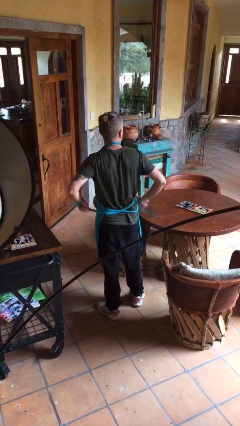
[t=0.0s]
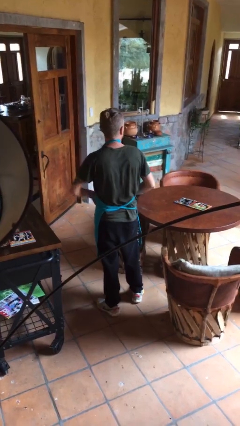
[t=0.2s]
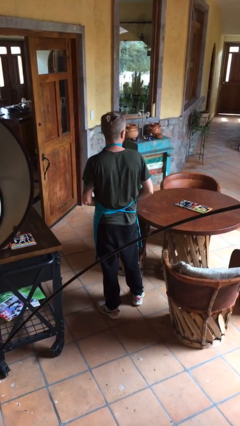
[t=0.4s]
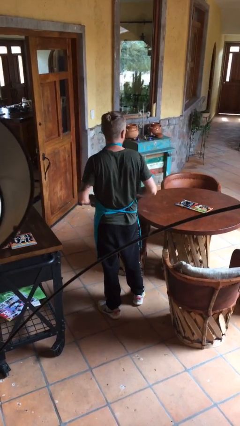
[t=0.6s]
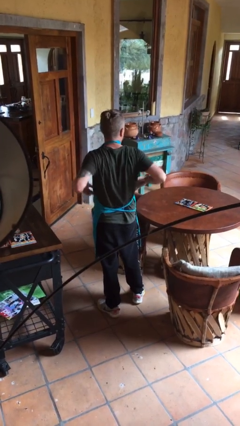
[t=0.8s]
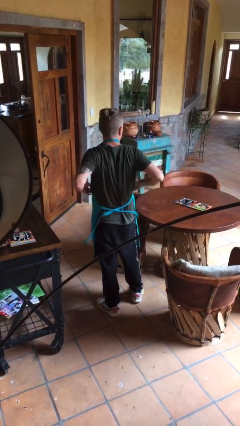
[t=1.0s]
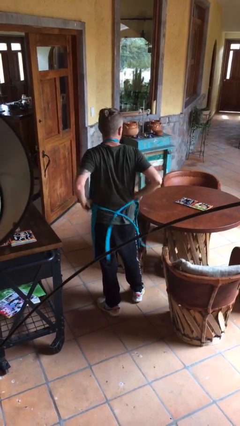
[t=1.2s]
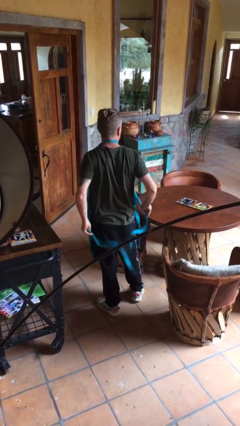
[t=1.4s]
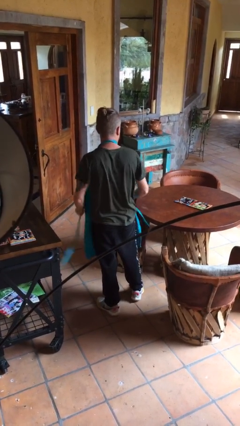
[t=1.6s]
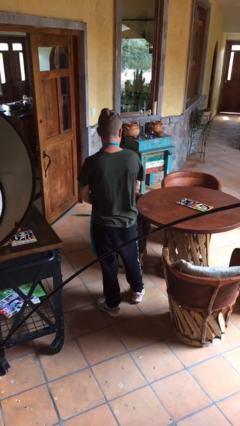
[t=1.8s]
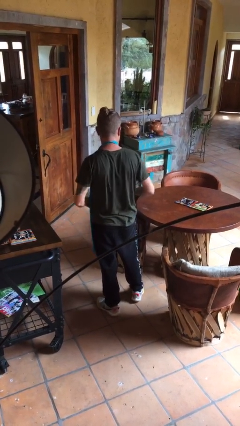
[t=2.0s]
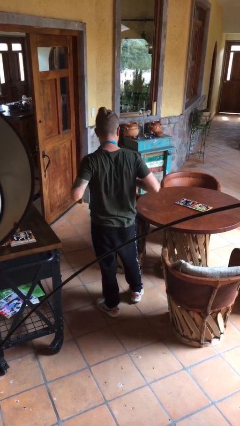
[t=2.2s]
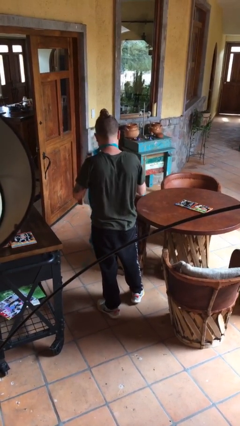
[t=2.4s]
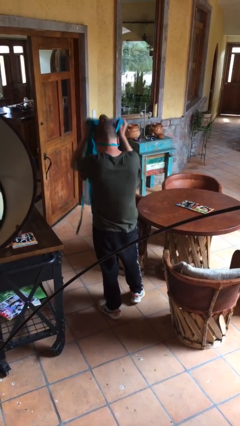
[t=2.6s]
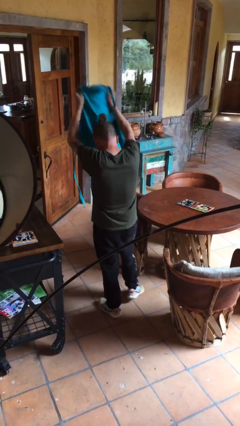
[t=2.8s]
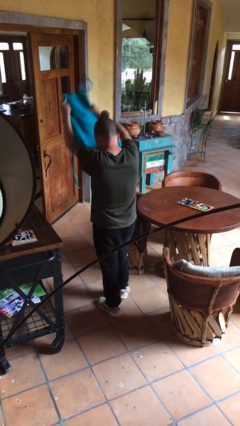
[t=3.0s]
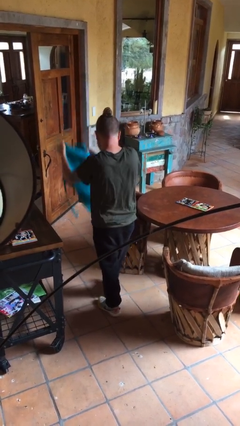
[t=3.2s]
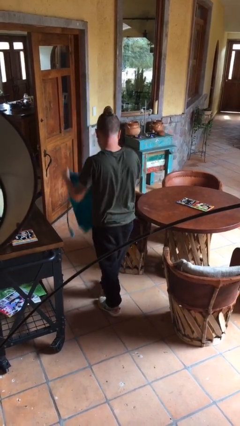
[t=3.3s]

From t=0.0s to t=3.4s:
person takes off apron

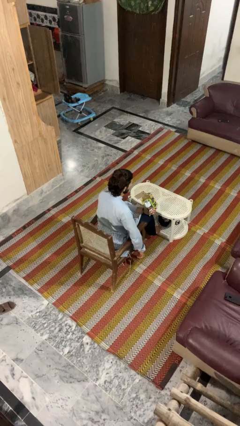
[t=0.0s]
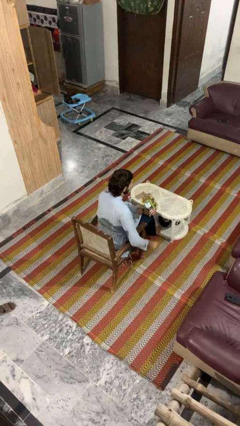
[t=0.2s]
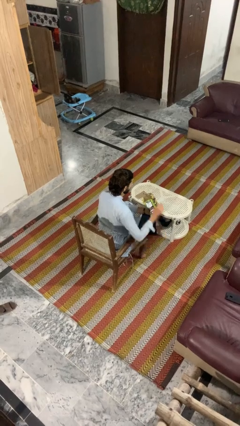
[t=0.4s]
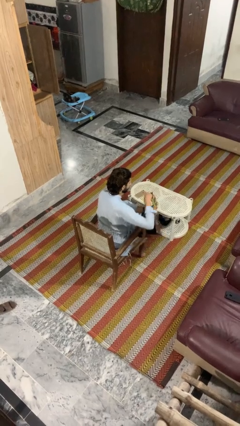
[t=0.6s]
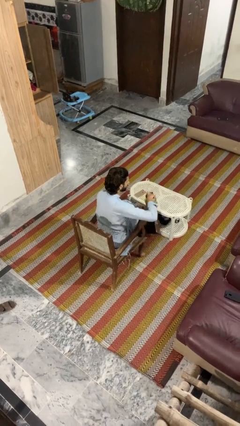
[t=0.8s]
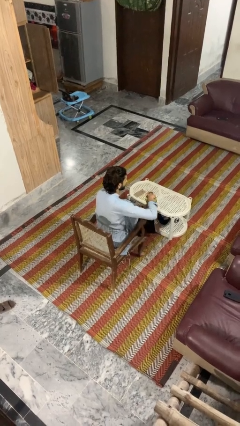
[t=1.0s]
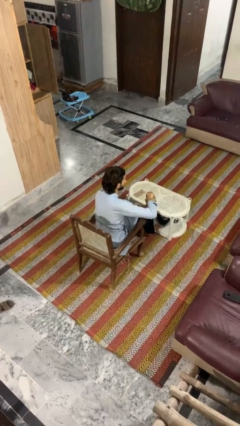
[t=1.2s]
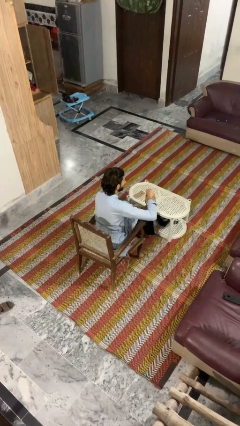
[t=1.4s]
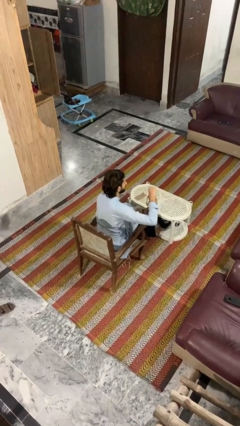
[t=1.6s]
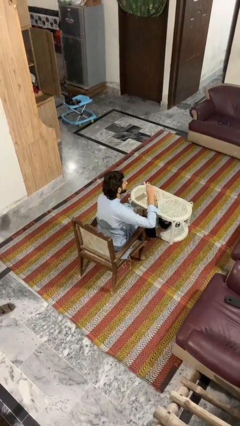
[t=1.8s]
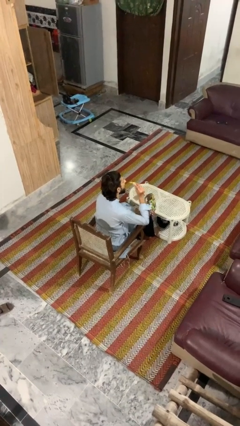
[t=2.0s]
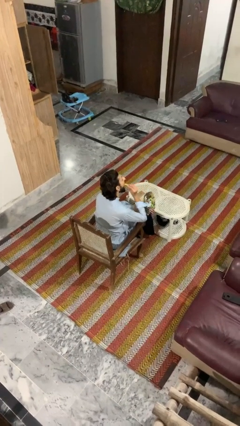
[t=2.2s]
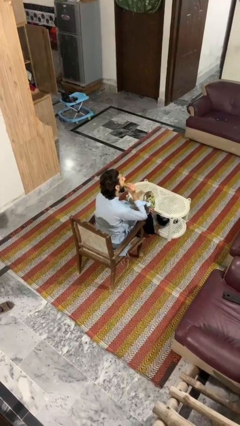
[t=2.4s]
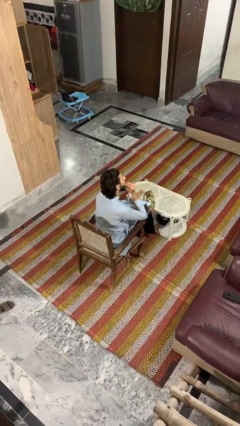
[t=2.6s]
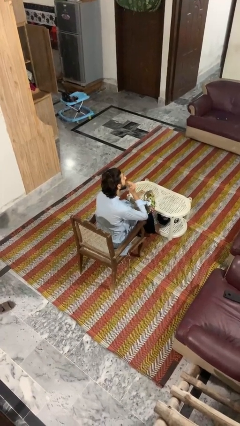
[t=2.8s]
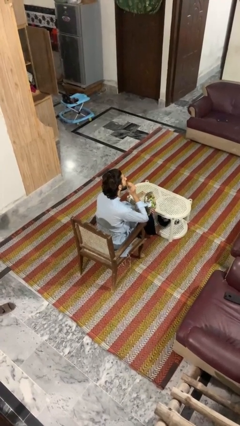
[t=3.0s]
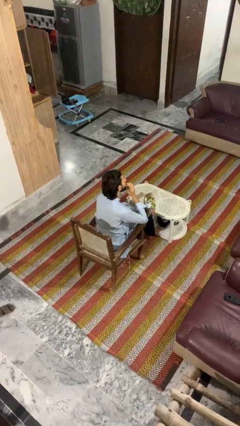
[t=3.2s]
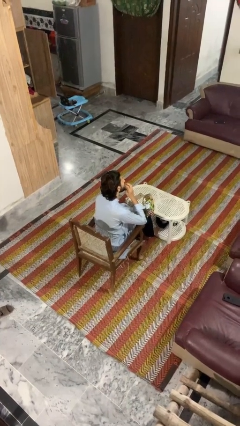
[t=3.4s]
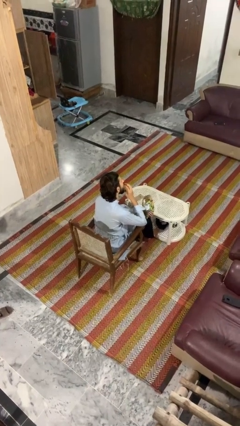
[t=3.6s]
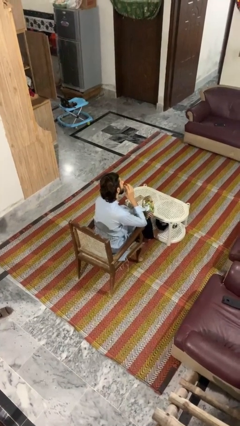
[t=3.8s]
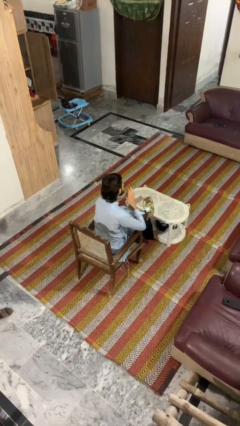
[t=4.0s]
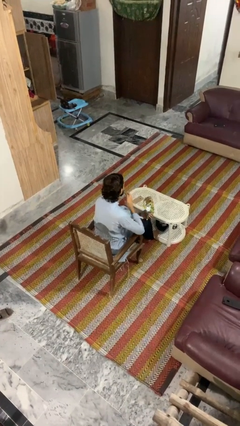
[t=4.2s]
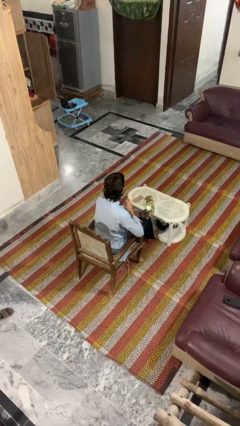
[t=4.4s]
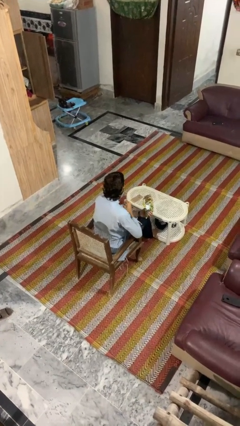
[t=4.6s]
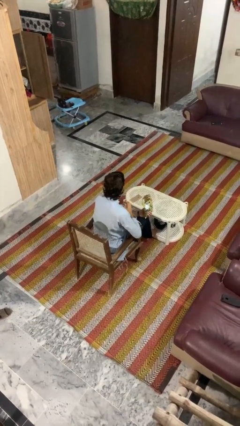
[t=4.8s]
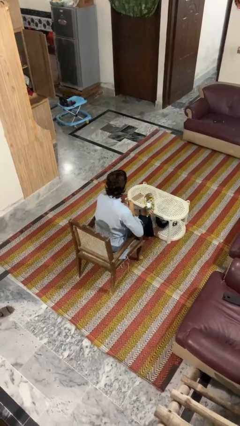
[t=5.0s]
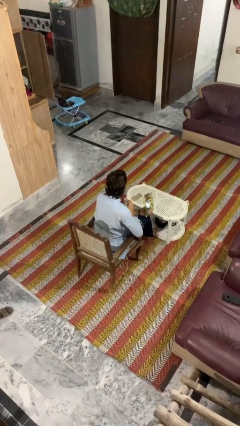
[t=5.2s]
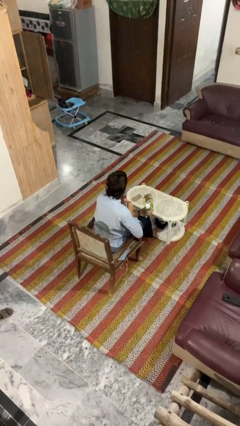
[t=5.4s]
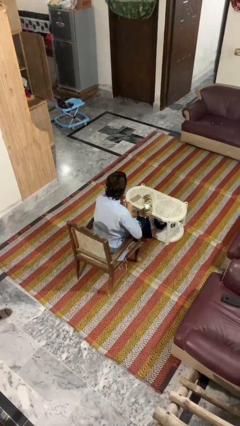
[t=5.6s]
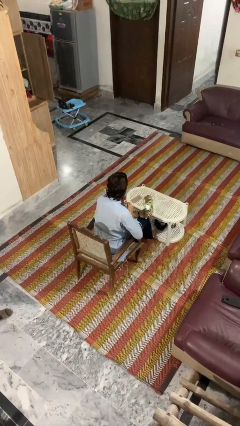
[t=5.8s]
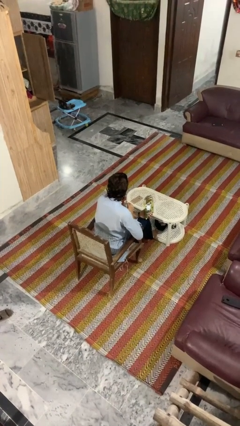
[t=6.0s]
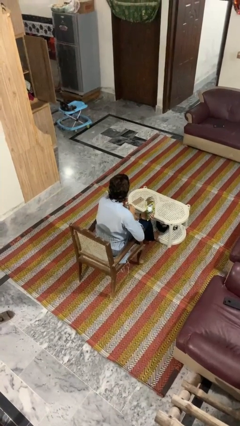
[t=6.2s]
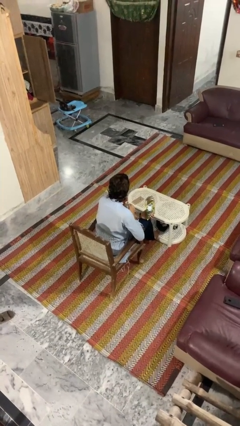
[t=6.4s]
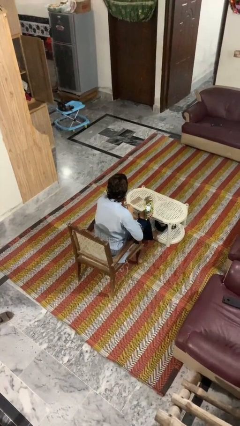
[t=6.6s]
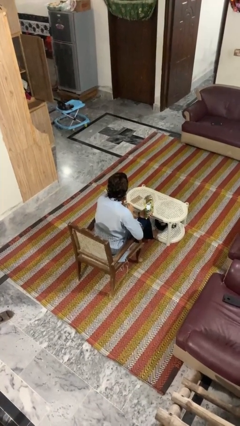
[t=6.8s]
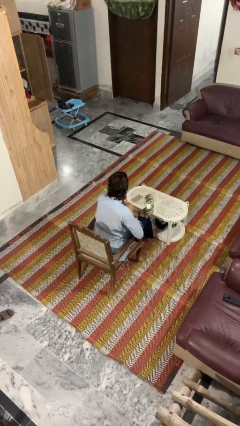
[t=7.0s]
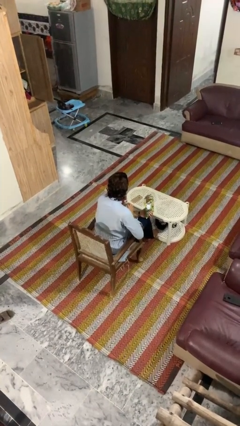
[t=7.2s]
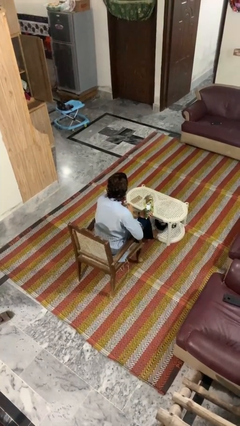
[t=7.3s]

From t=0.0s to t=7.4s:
person eats snack from bag

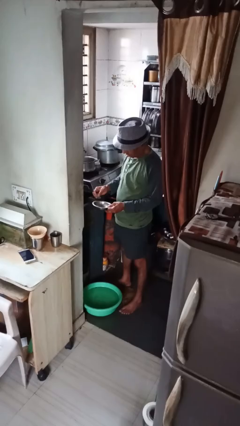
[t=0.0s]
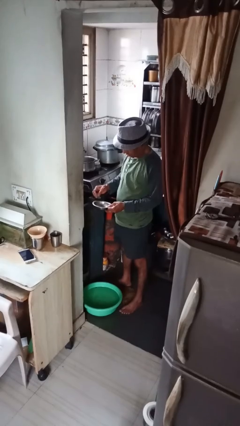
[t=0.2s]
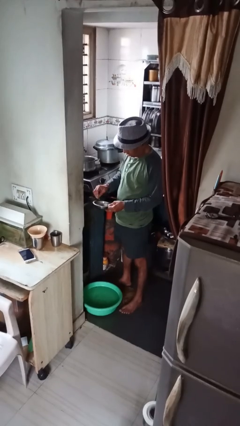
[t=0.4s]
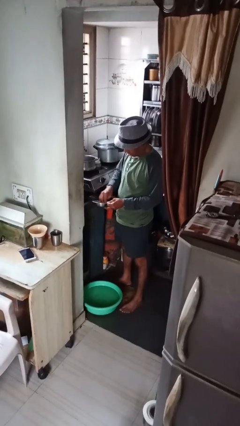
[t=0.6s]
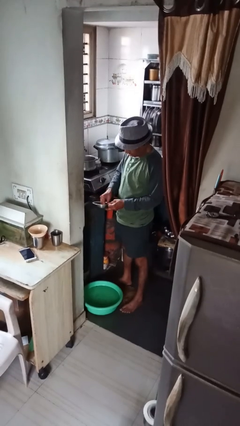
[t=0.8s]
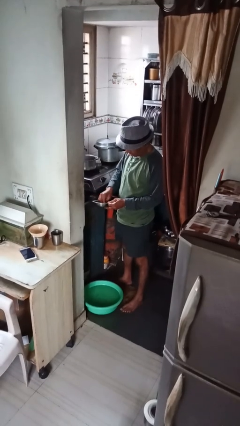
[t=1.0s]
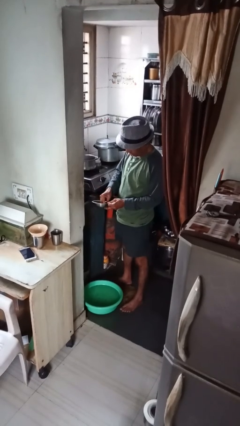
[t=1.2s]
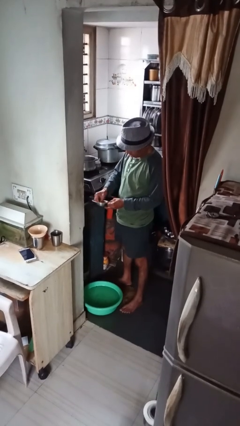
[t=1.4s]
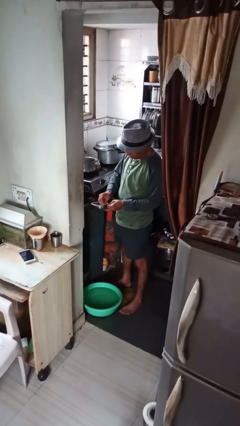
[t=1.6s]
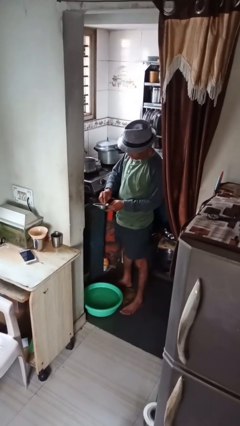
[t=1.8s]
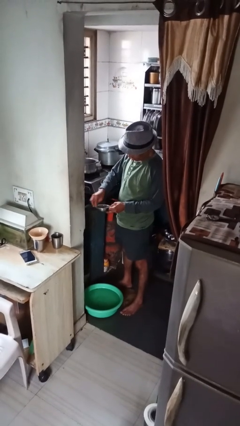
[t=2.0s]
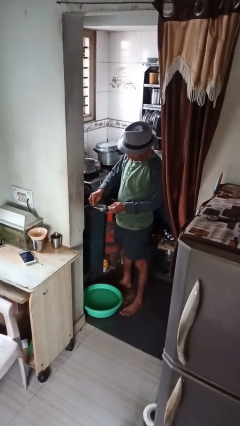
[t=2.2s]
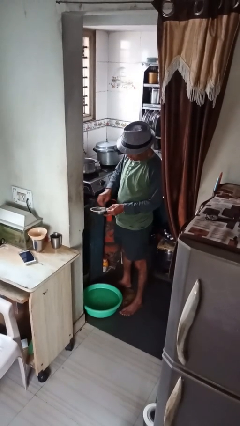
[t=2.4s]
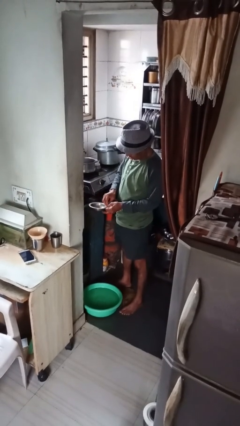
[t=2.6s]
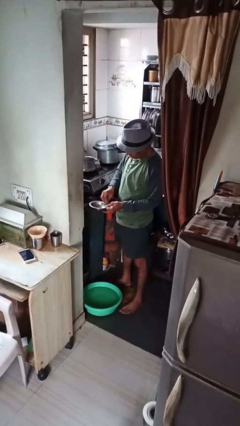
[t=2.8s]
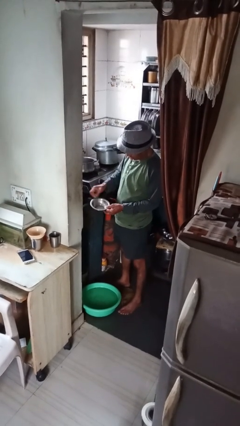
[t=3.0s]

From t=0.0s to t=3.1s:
person washes dish

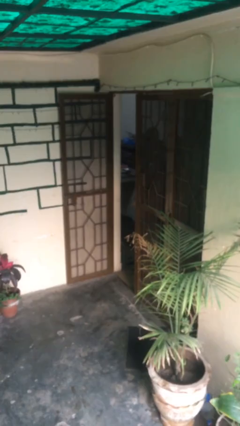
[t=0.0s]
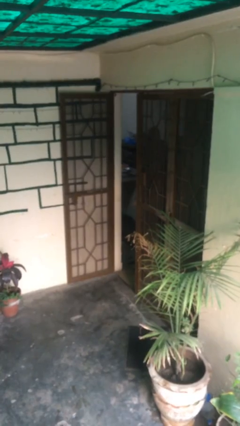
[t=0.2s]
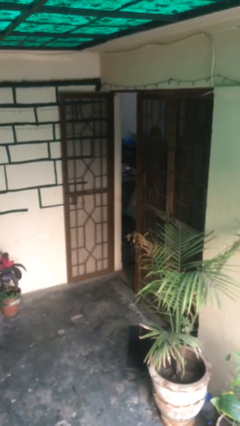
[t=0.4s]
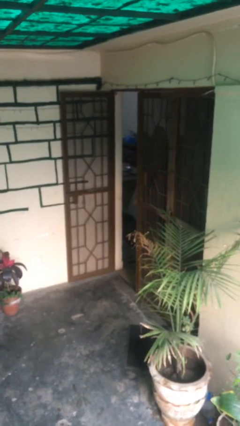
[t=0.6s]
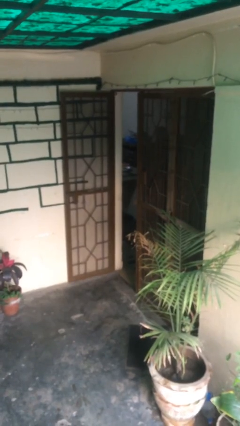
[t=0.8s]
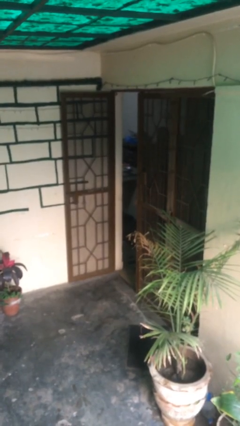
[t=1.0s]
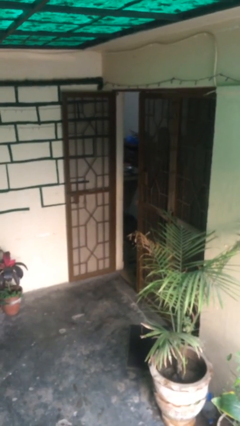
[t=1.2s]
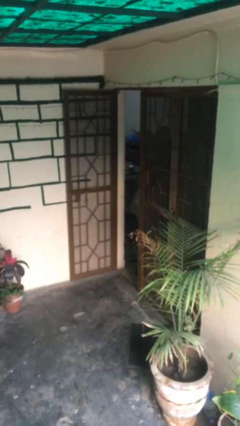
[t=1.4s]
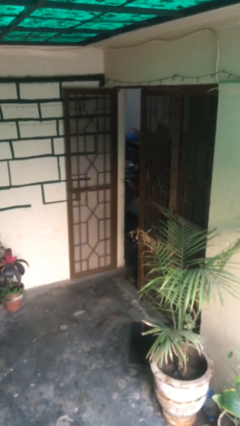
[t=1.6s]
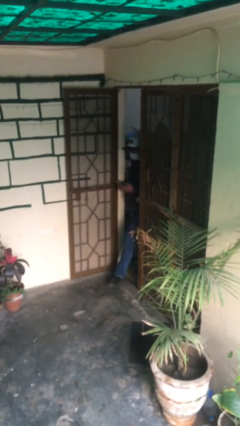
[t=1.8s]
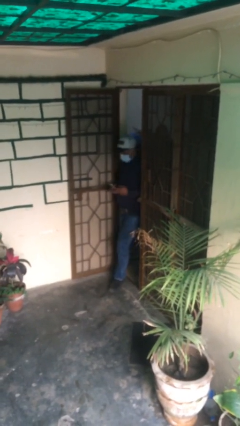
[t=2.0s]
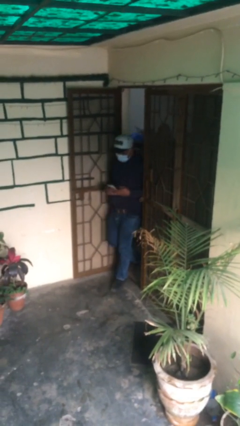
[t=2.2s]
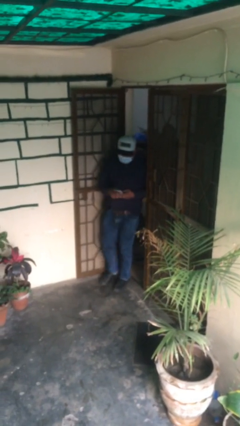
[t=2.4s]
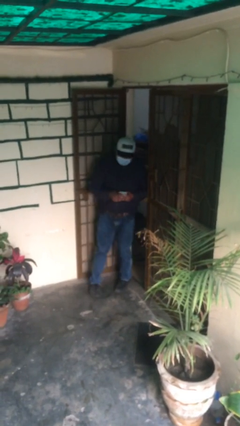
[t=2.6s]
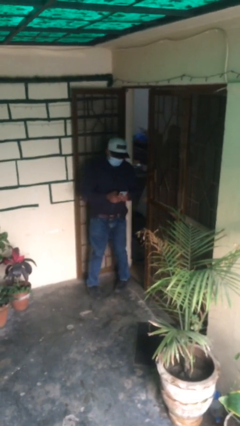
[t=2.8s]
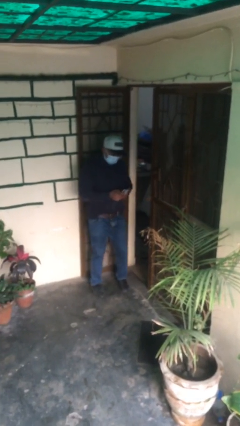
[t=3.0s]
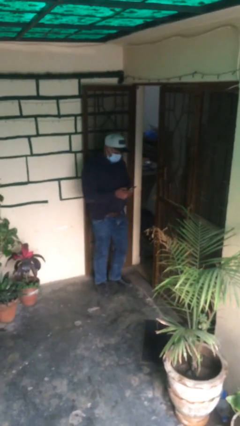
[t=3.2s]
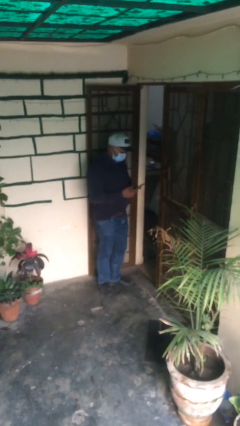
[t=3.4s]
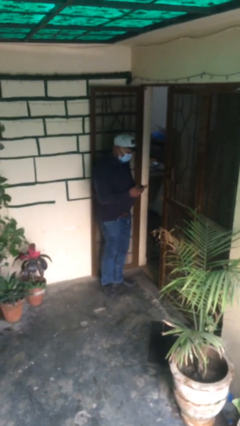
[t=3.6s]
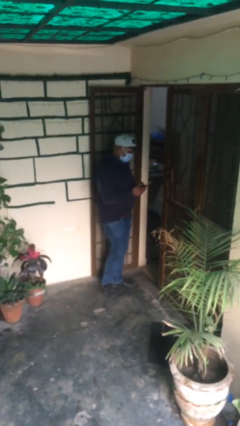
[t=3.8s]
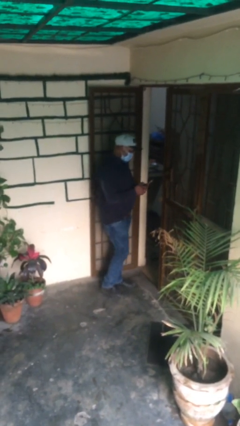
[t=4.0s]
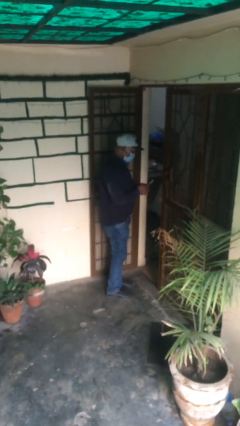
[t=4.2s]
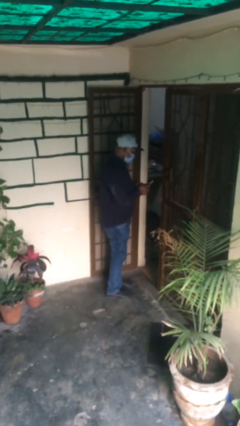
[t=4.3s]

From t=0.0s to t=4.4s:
person enters scene through structure
